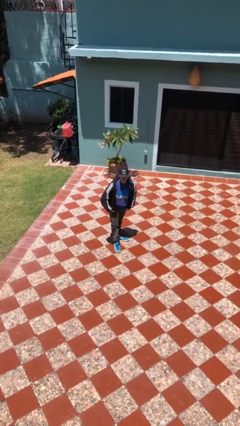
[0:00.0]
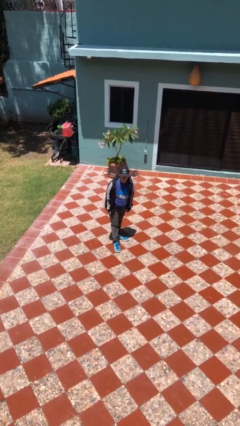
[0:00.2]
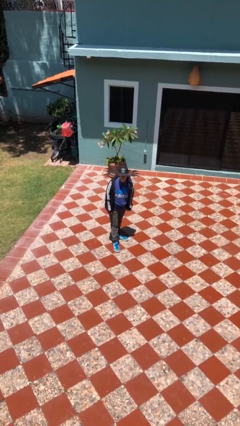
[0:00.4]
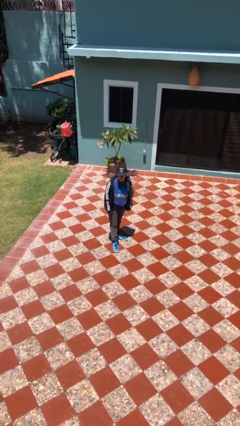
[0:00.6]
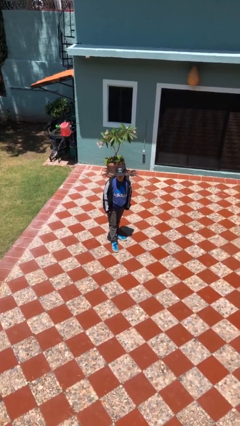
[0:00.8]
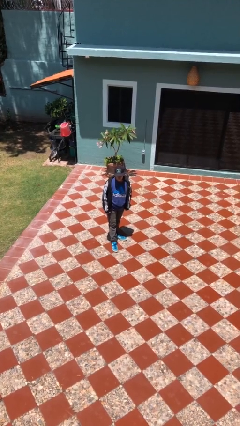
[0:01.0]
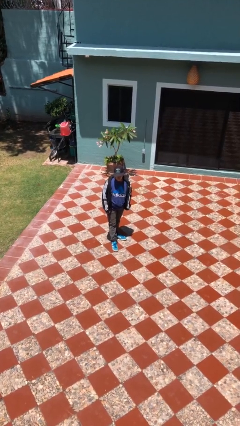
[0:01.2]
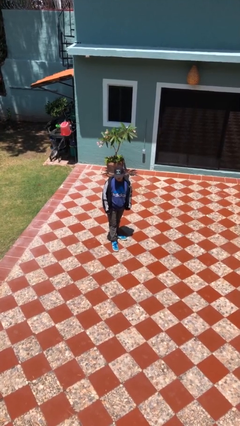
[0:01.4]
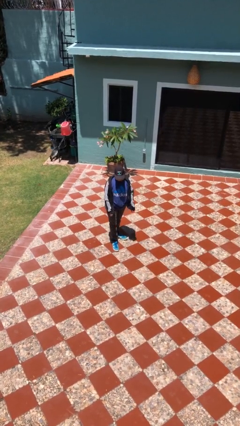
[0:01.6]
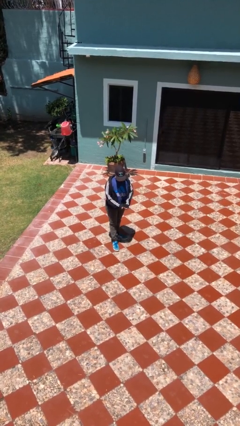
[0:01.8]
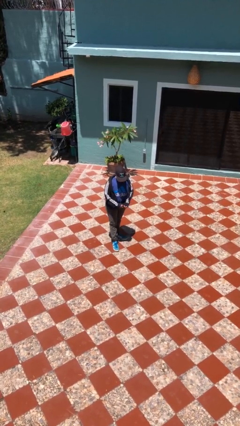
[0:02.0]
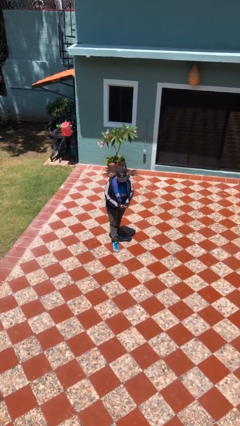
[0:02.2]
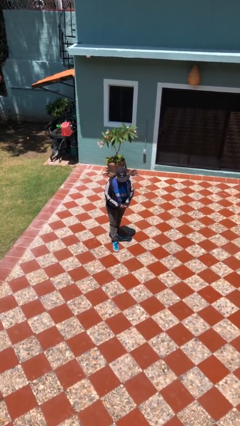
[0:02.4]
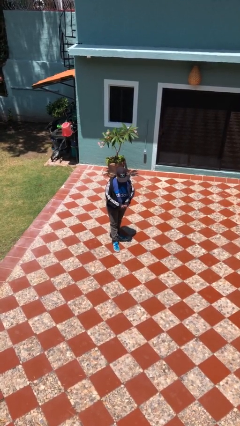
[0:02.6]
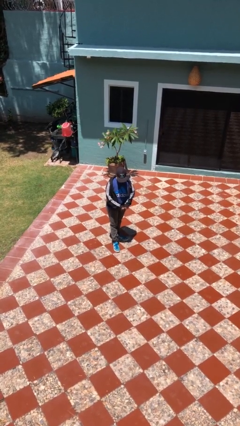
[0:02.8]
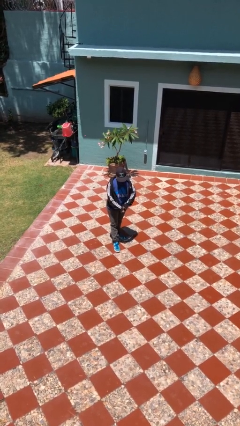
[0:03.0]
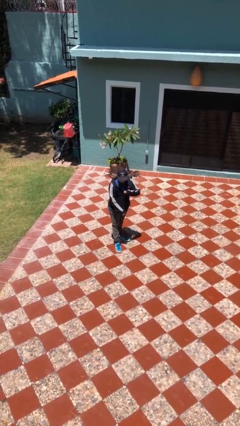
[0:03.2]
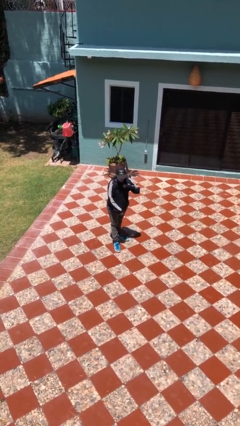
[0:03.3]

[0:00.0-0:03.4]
person zips up jacket

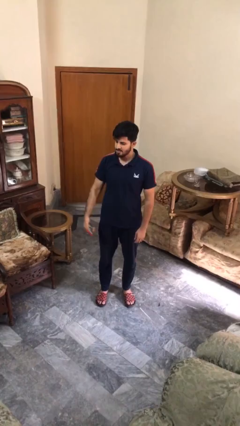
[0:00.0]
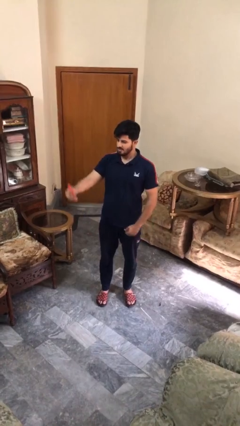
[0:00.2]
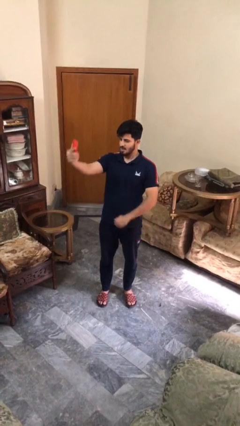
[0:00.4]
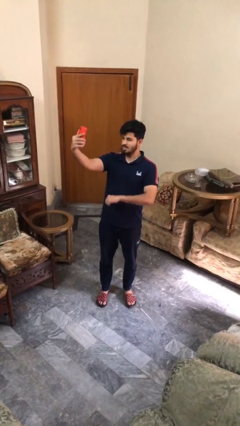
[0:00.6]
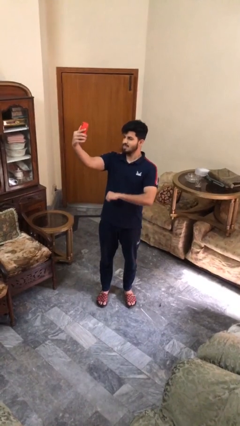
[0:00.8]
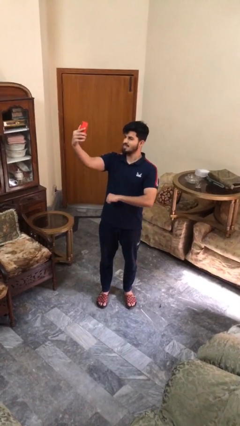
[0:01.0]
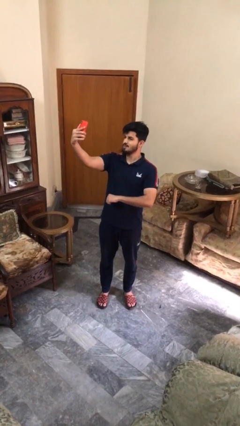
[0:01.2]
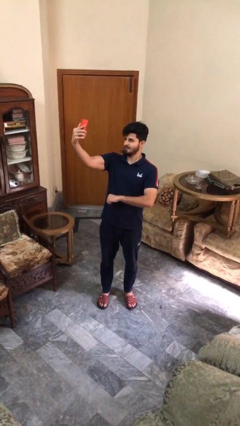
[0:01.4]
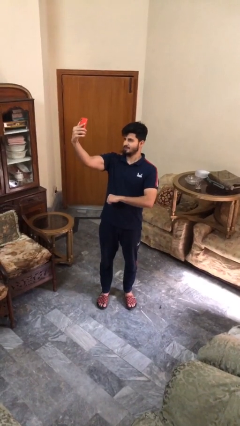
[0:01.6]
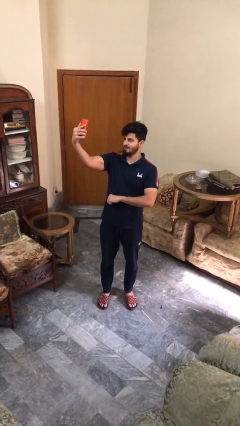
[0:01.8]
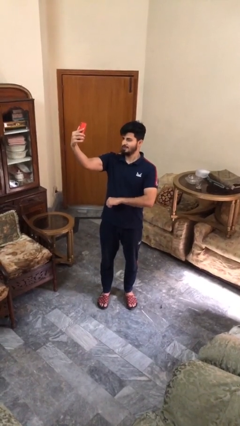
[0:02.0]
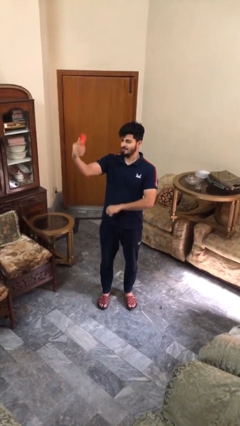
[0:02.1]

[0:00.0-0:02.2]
person takes selfie

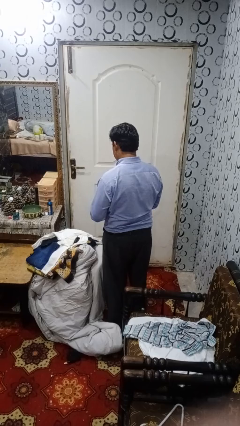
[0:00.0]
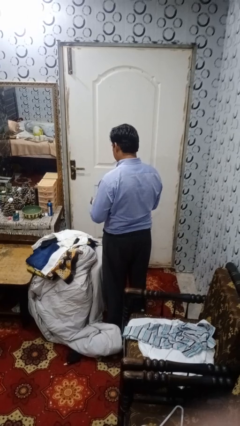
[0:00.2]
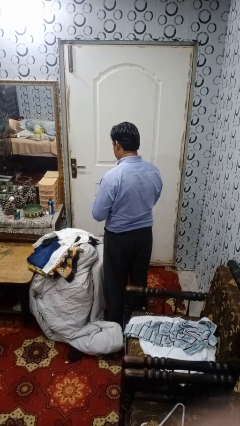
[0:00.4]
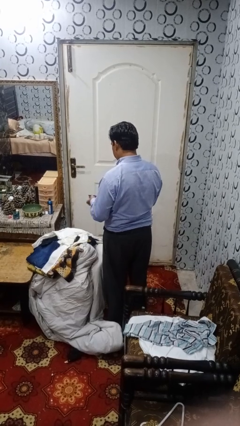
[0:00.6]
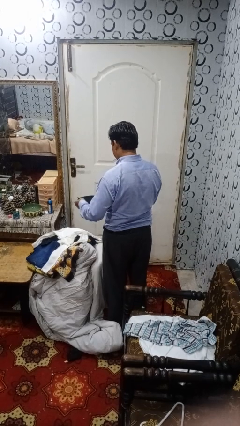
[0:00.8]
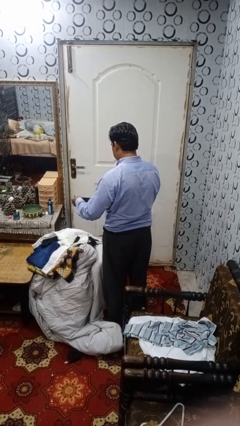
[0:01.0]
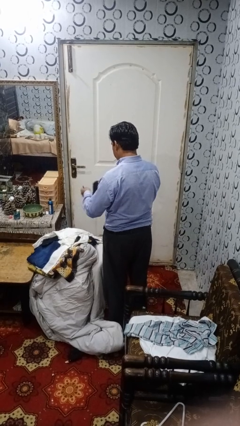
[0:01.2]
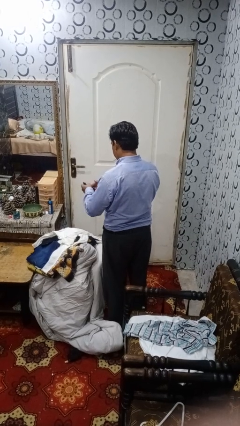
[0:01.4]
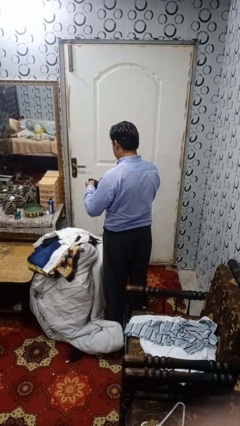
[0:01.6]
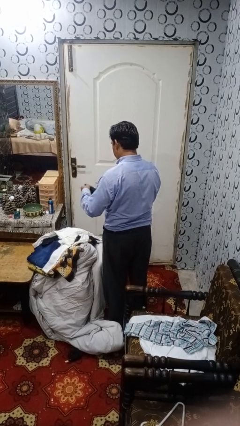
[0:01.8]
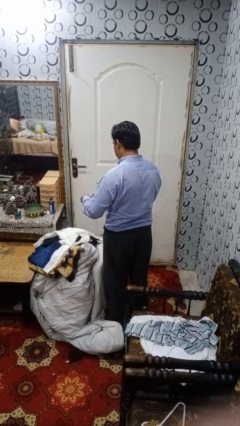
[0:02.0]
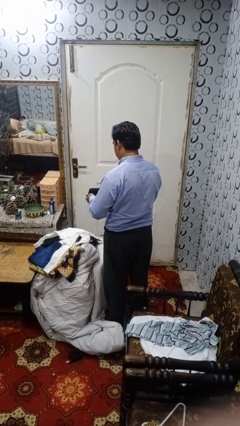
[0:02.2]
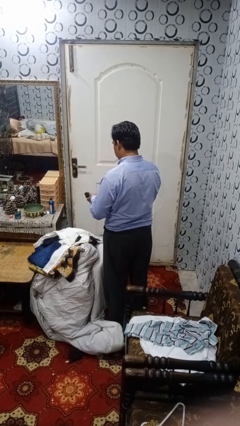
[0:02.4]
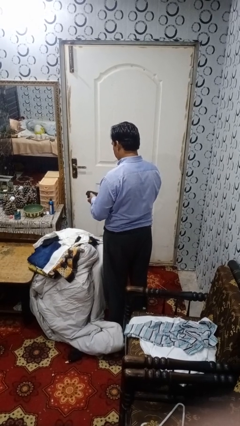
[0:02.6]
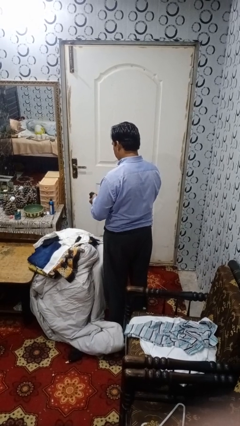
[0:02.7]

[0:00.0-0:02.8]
person folds socks

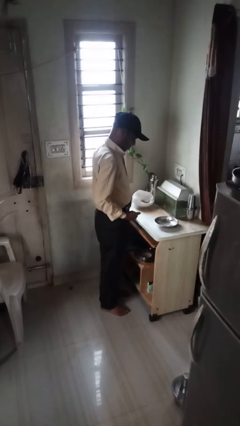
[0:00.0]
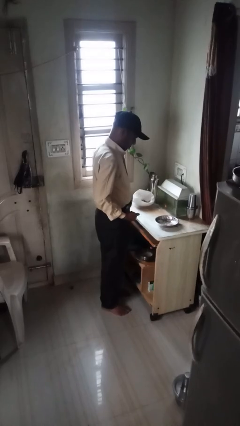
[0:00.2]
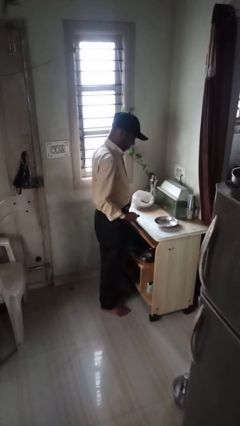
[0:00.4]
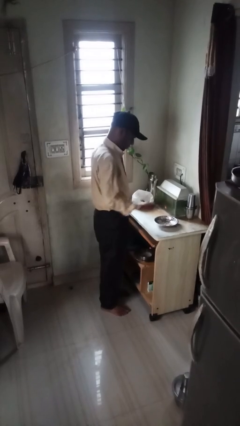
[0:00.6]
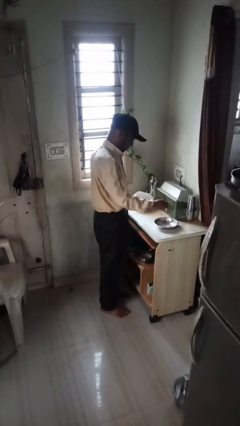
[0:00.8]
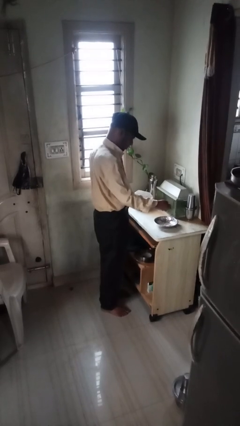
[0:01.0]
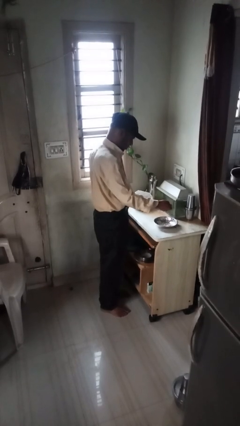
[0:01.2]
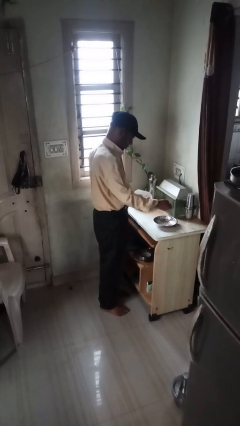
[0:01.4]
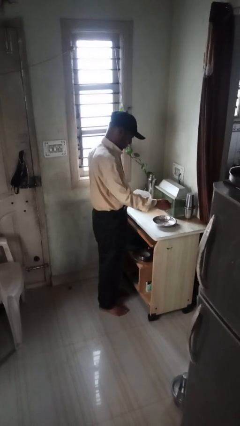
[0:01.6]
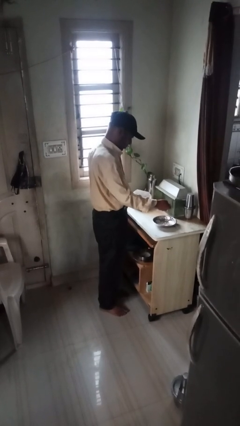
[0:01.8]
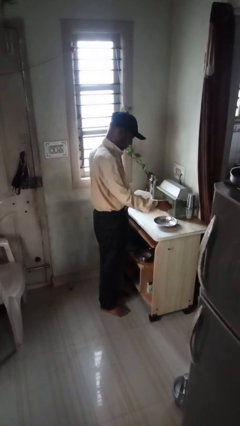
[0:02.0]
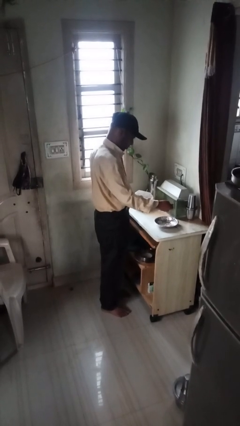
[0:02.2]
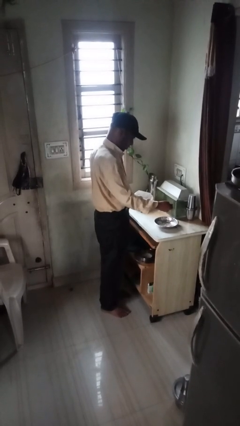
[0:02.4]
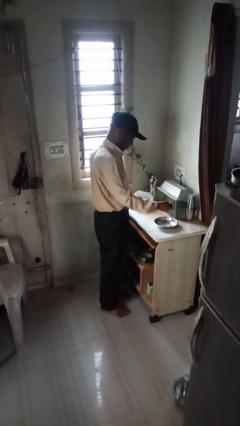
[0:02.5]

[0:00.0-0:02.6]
person pours into bowl

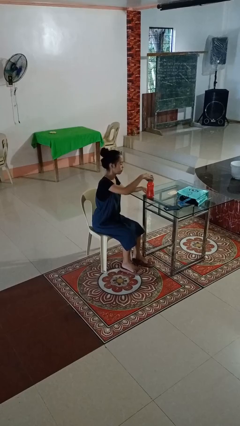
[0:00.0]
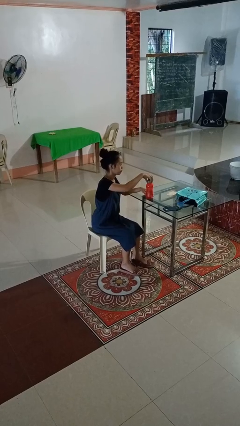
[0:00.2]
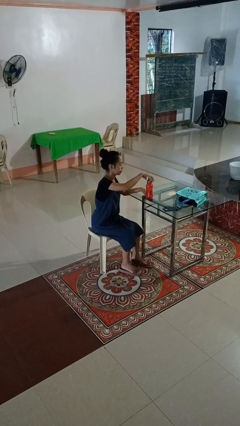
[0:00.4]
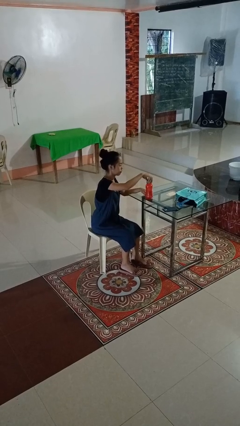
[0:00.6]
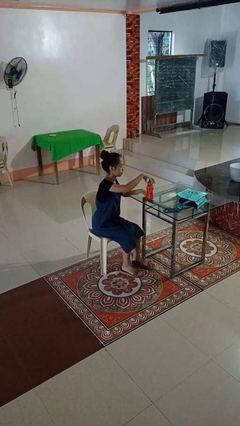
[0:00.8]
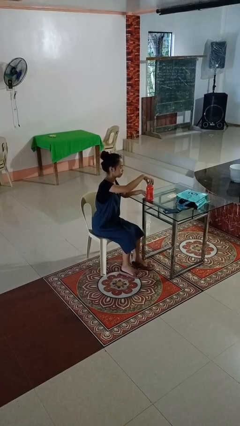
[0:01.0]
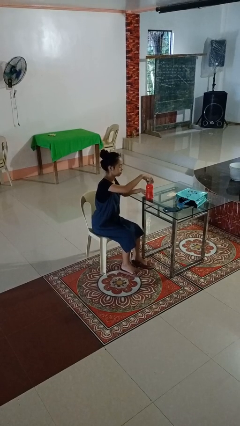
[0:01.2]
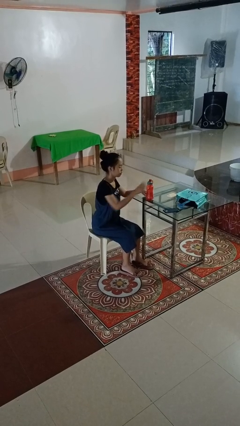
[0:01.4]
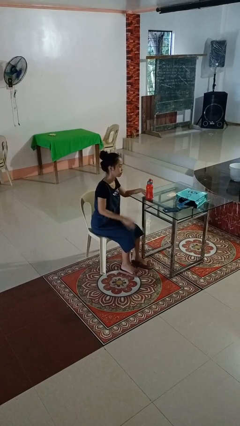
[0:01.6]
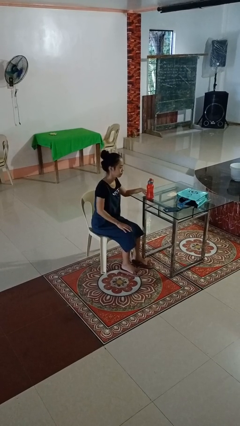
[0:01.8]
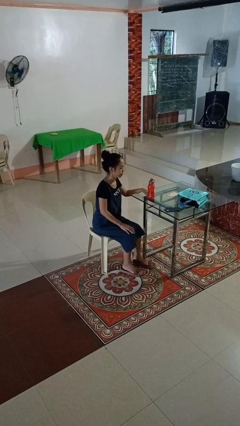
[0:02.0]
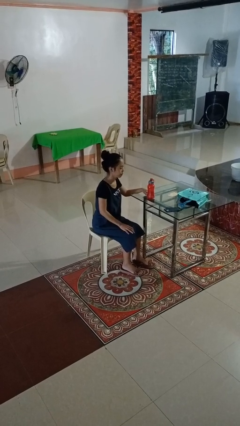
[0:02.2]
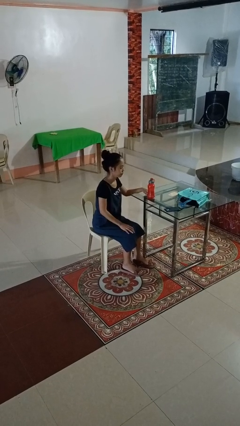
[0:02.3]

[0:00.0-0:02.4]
person screws lid to bottle

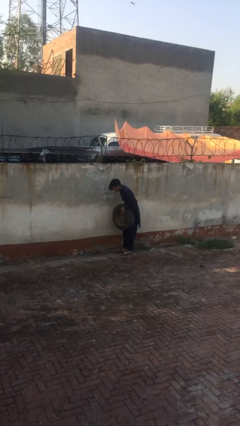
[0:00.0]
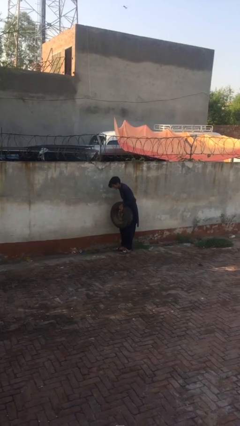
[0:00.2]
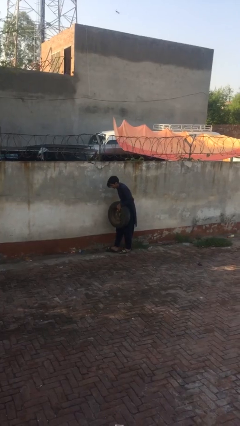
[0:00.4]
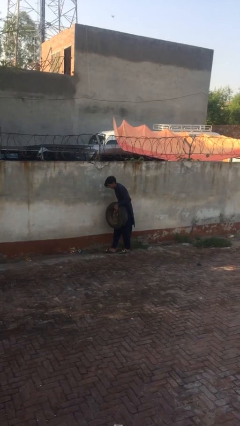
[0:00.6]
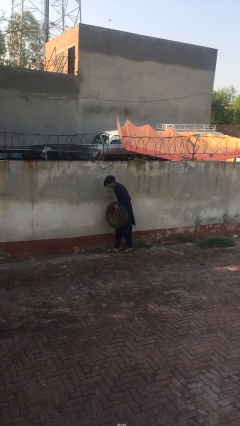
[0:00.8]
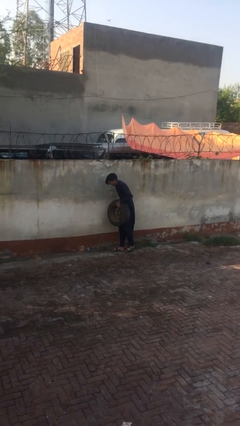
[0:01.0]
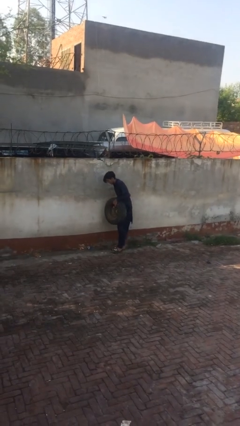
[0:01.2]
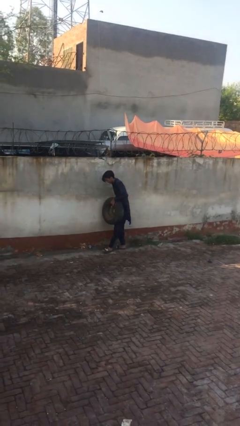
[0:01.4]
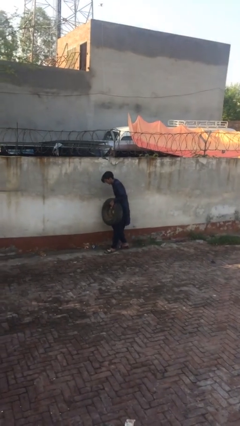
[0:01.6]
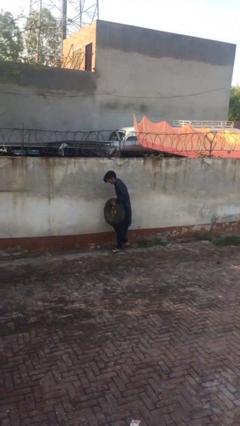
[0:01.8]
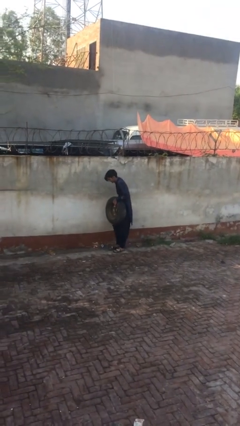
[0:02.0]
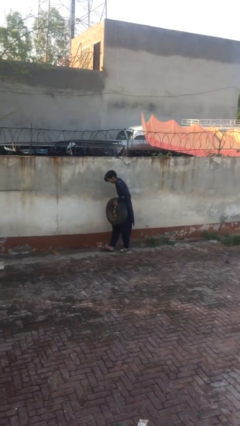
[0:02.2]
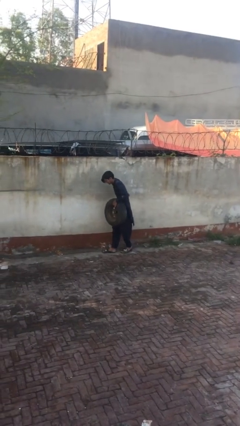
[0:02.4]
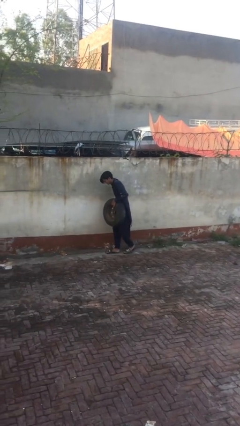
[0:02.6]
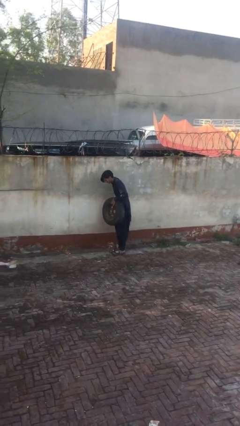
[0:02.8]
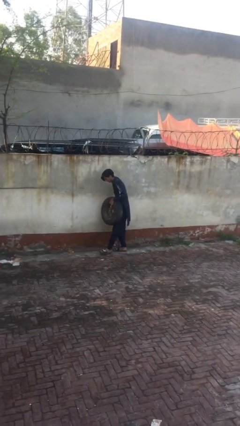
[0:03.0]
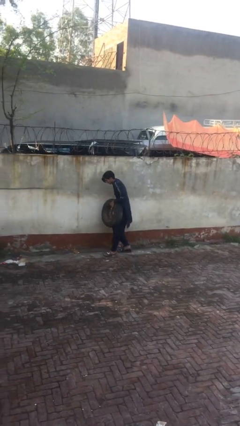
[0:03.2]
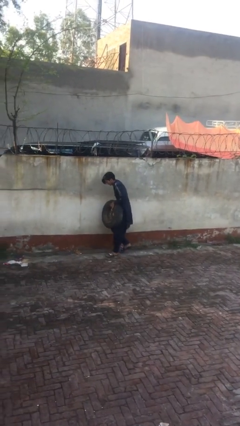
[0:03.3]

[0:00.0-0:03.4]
person carries heavy object

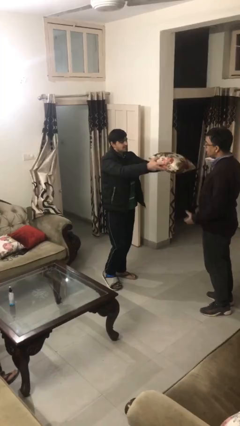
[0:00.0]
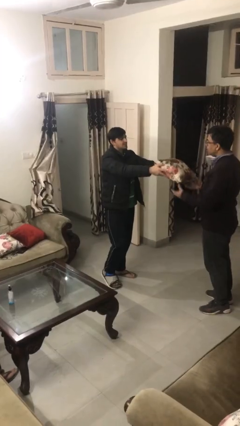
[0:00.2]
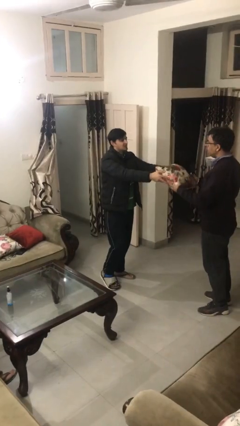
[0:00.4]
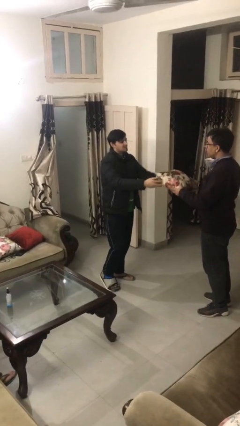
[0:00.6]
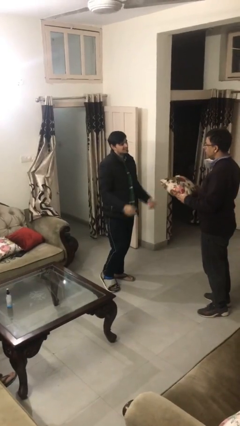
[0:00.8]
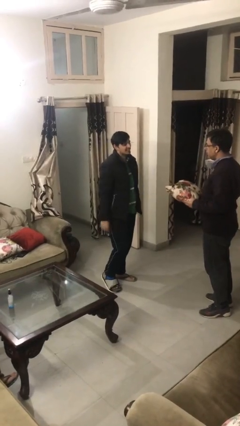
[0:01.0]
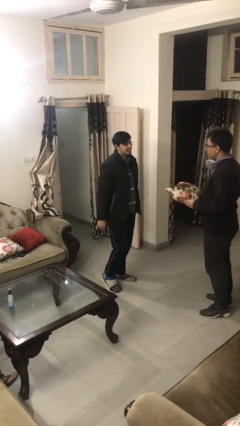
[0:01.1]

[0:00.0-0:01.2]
person transfers object to person
